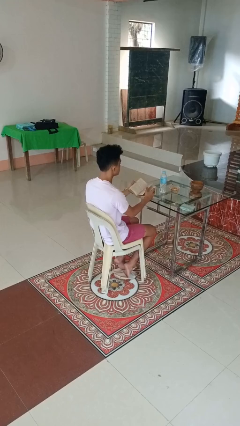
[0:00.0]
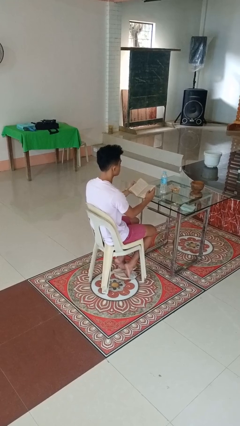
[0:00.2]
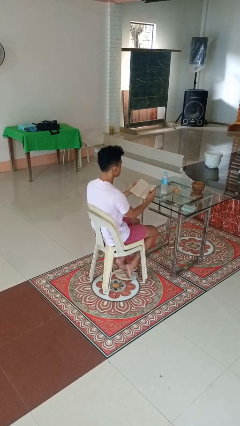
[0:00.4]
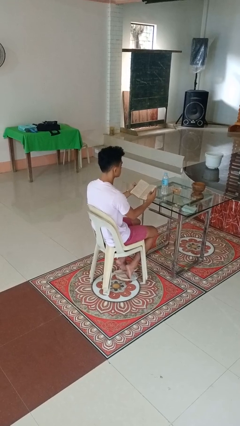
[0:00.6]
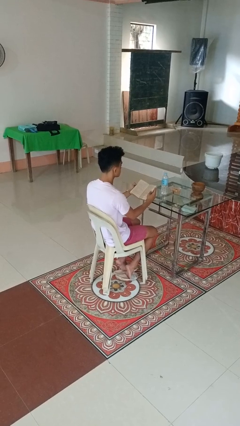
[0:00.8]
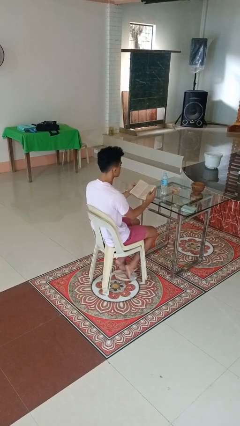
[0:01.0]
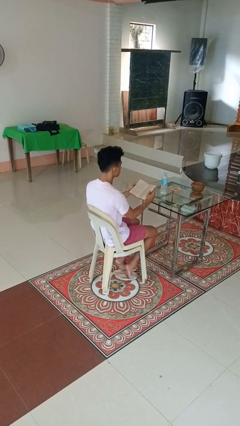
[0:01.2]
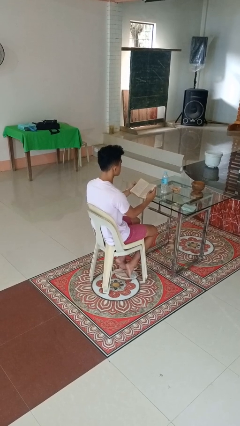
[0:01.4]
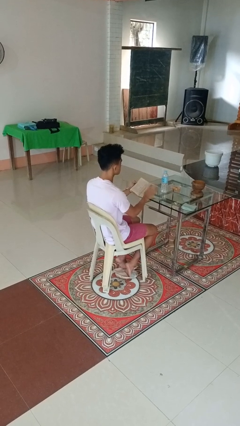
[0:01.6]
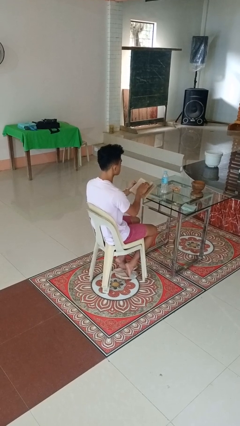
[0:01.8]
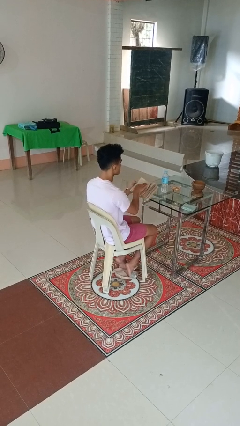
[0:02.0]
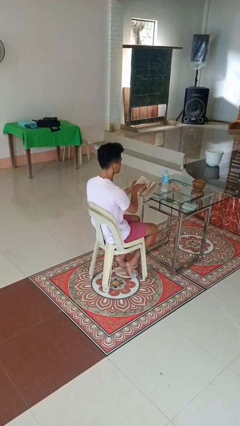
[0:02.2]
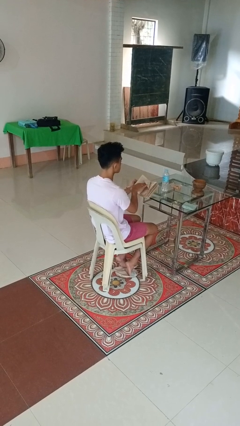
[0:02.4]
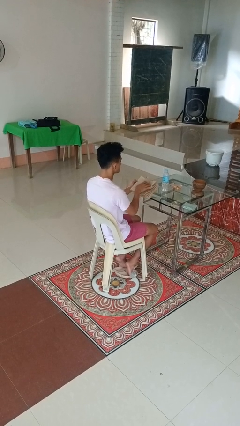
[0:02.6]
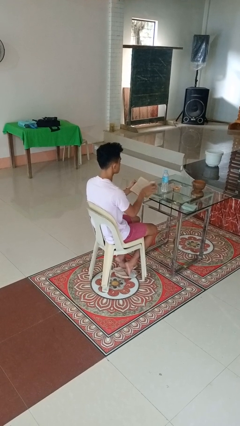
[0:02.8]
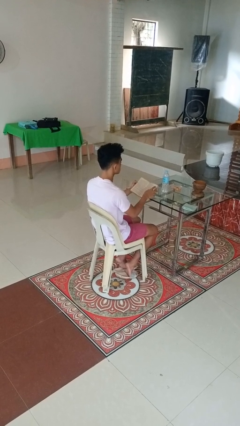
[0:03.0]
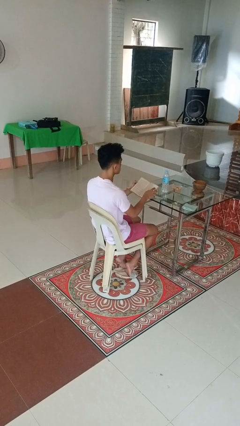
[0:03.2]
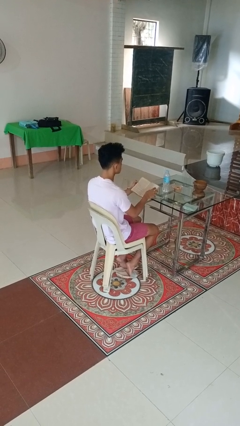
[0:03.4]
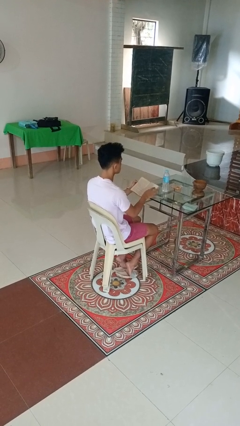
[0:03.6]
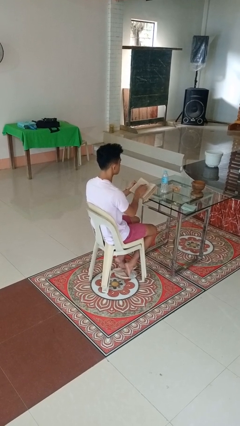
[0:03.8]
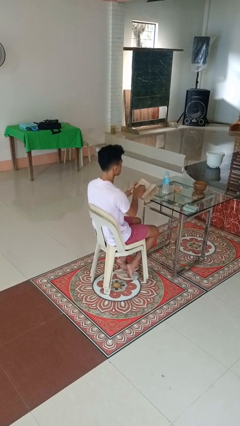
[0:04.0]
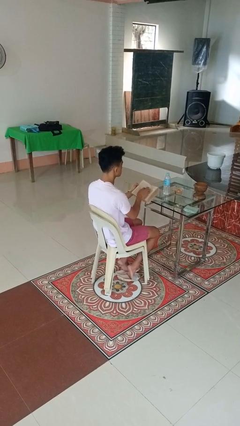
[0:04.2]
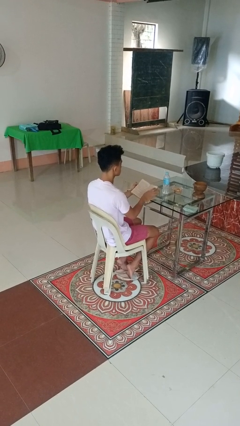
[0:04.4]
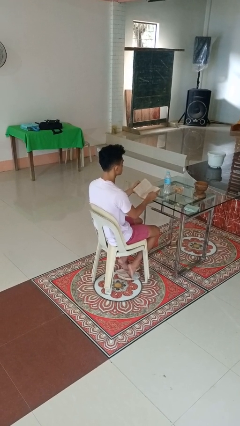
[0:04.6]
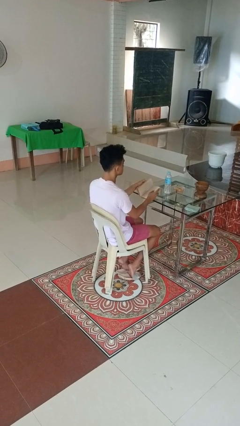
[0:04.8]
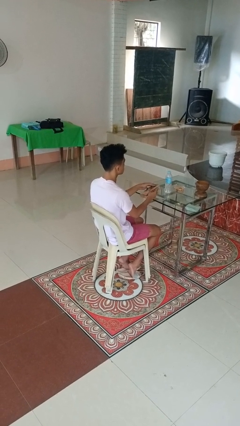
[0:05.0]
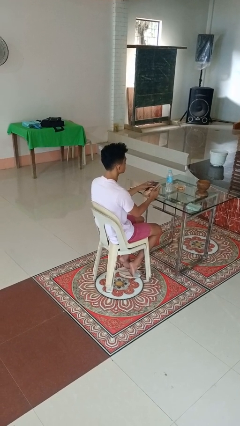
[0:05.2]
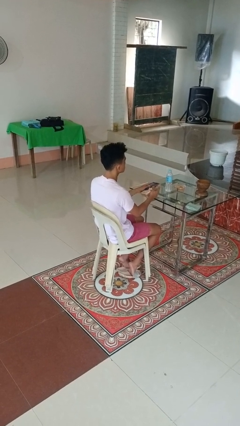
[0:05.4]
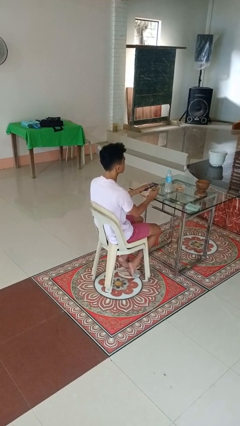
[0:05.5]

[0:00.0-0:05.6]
person reads book

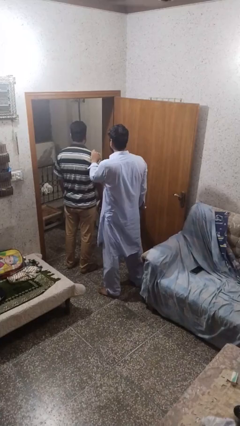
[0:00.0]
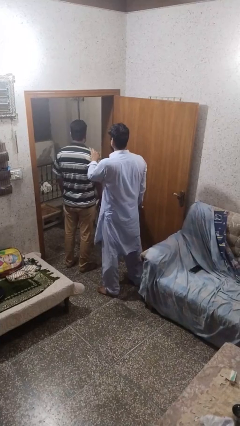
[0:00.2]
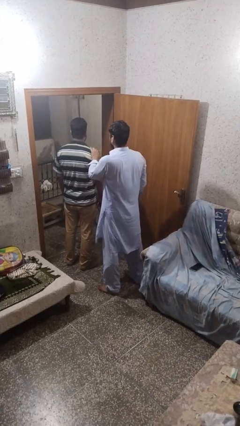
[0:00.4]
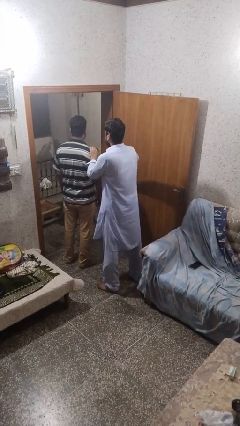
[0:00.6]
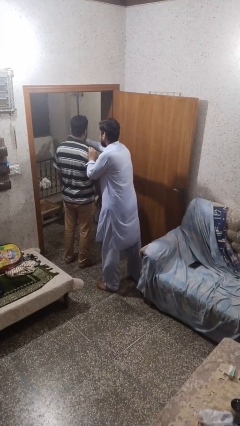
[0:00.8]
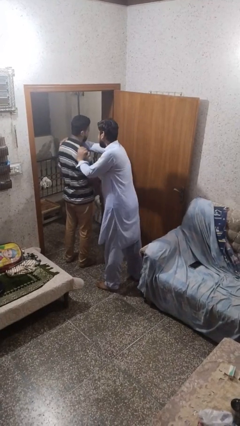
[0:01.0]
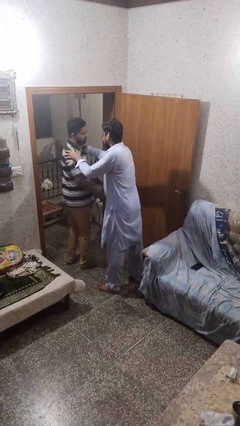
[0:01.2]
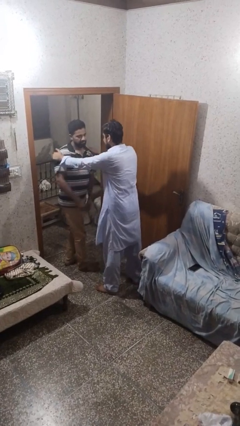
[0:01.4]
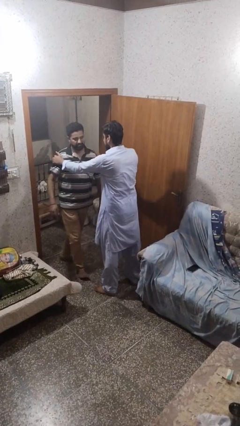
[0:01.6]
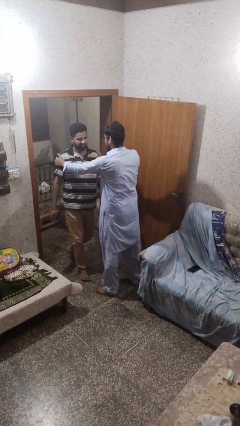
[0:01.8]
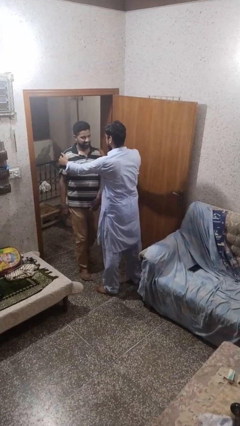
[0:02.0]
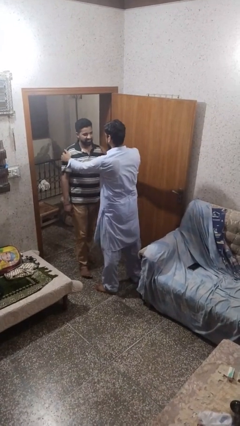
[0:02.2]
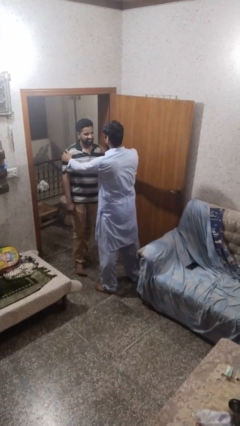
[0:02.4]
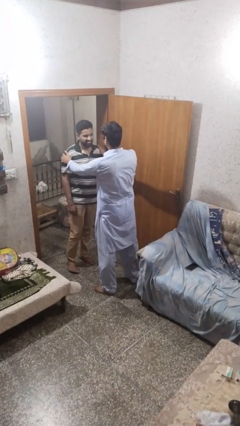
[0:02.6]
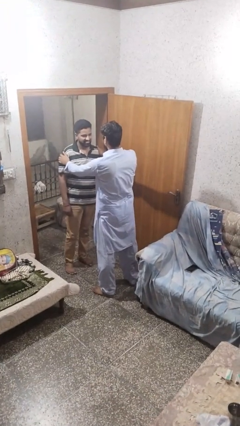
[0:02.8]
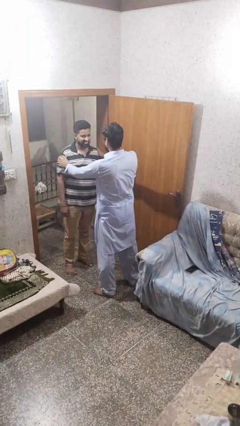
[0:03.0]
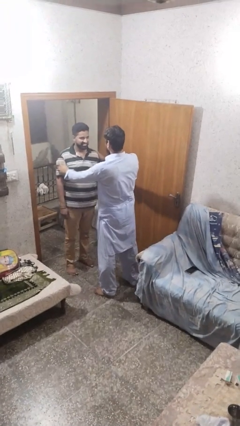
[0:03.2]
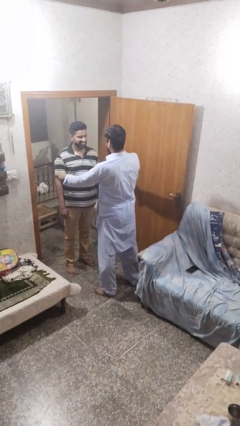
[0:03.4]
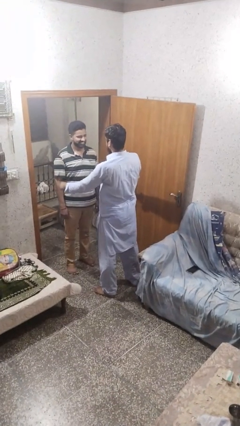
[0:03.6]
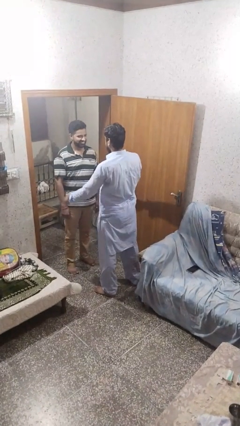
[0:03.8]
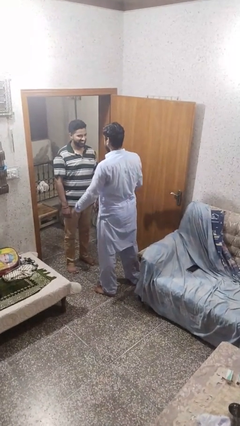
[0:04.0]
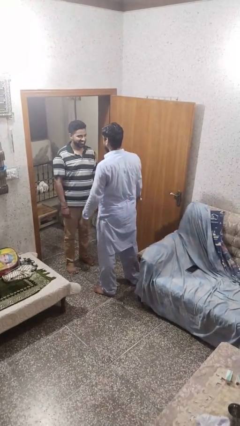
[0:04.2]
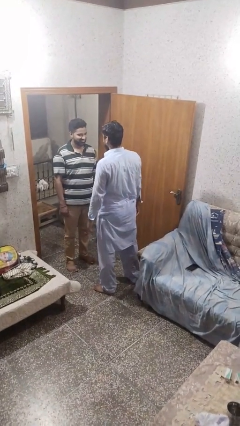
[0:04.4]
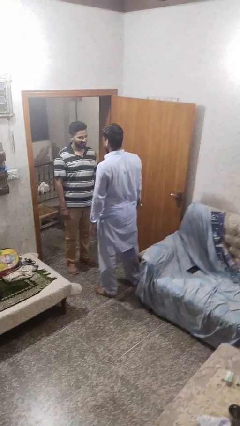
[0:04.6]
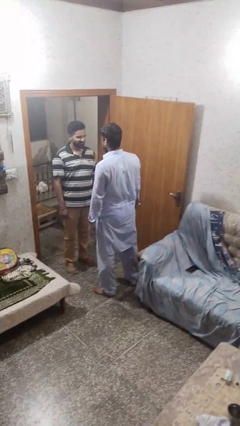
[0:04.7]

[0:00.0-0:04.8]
person spins person around

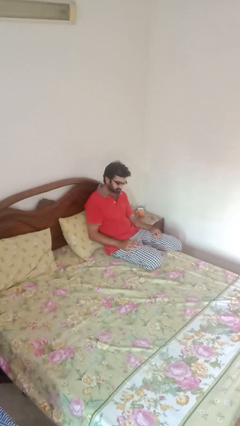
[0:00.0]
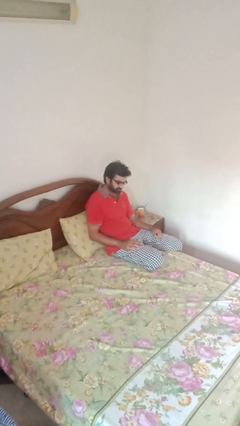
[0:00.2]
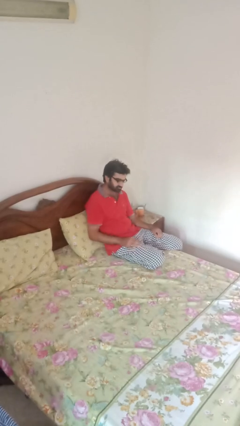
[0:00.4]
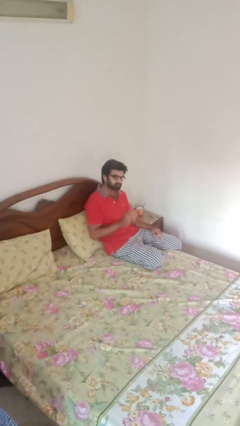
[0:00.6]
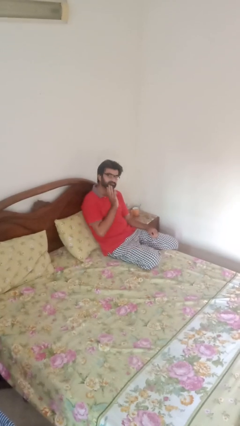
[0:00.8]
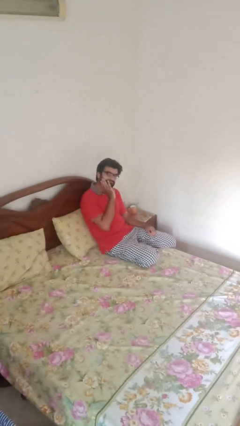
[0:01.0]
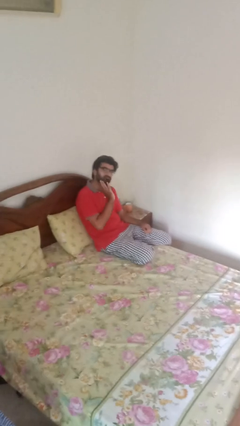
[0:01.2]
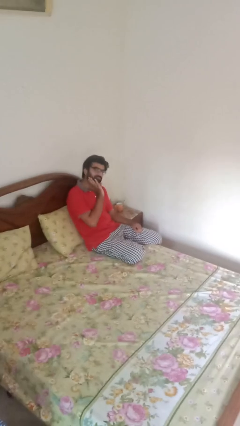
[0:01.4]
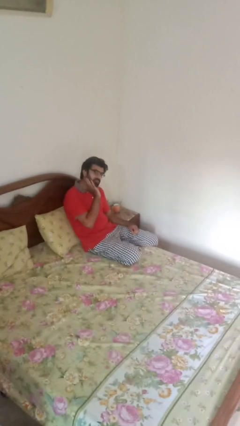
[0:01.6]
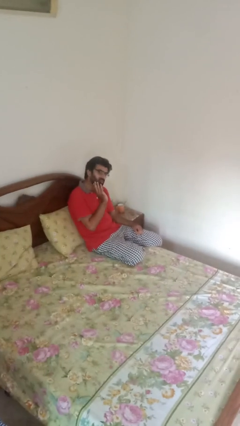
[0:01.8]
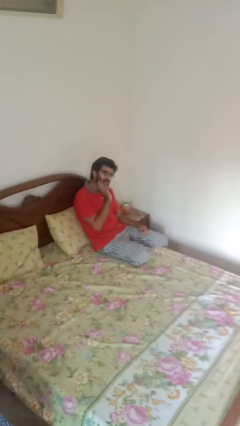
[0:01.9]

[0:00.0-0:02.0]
person strokes chin

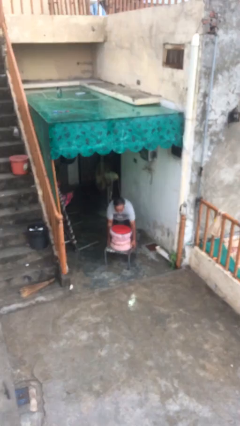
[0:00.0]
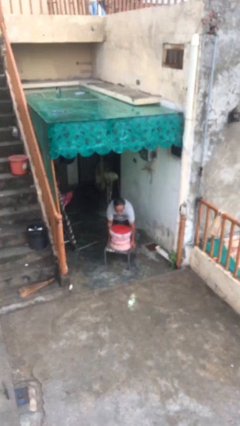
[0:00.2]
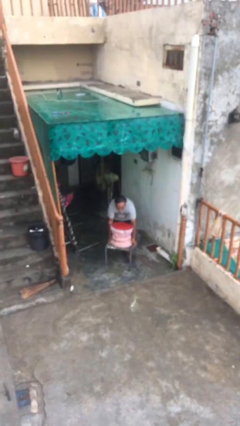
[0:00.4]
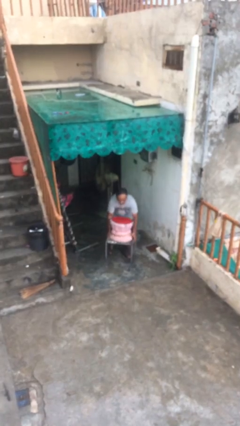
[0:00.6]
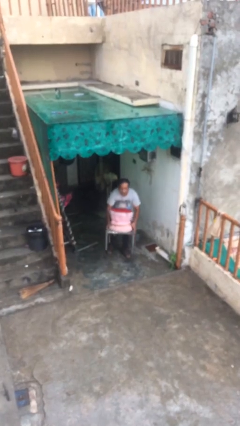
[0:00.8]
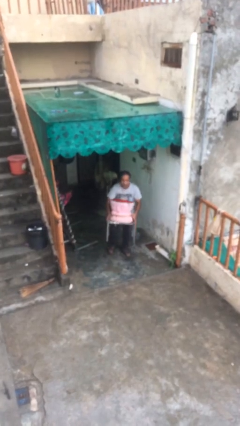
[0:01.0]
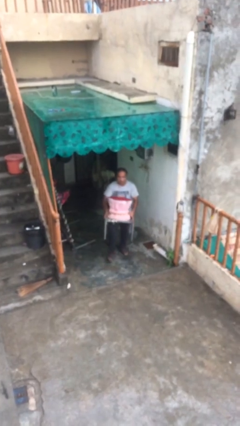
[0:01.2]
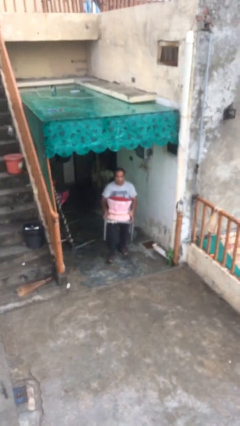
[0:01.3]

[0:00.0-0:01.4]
person picks up object from floor

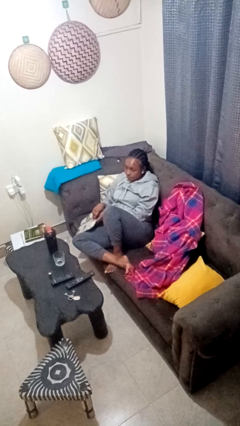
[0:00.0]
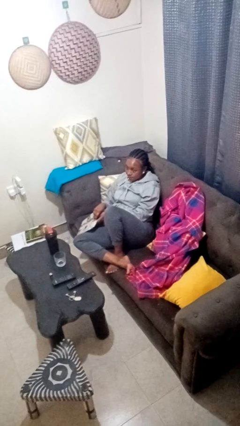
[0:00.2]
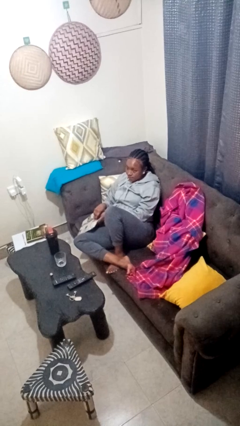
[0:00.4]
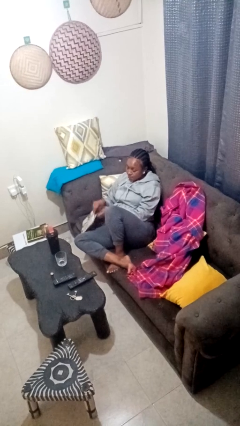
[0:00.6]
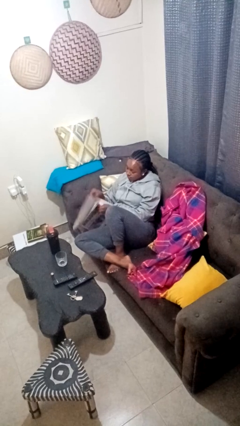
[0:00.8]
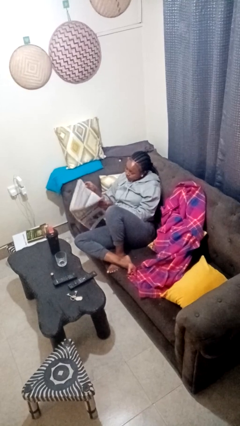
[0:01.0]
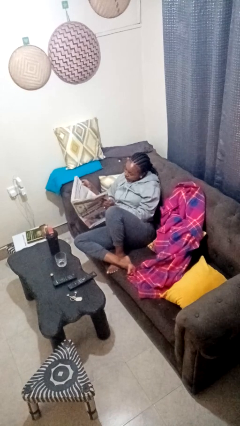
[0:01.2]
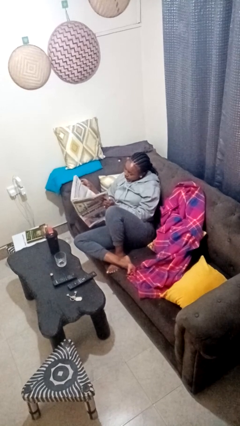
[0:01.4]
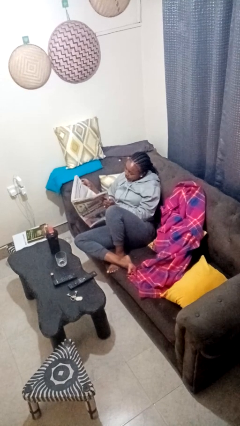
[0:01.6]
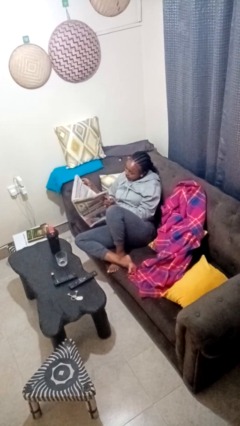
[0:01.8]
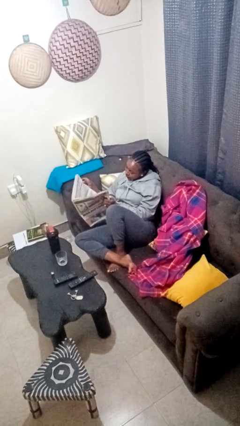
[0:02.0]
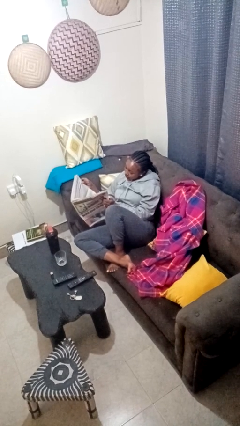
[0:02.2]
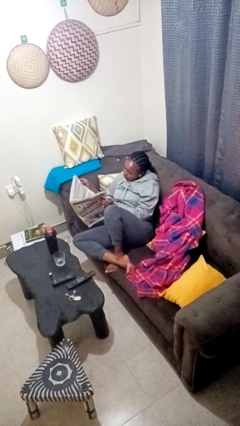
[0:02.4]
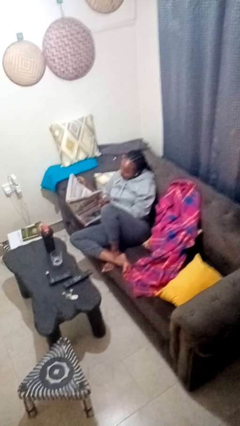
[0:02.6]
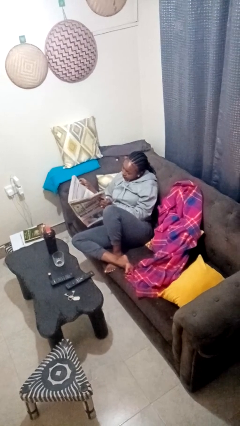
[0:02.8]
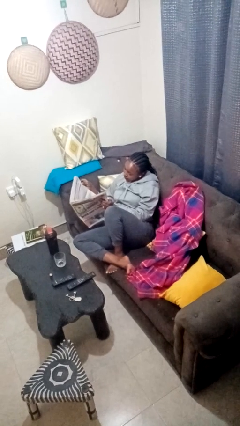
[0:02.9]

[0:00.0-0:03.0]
person reads newspaper

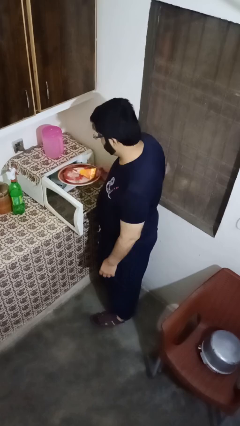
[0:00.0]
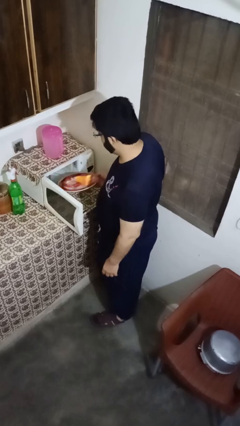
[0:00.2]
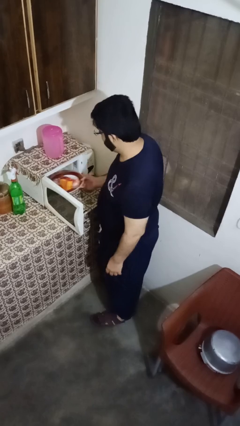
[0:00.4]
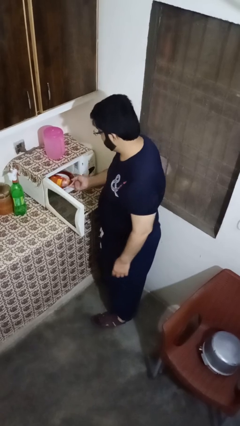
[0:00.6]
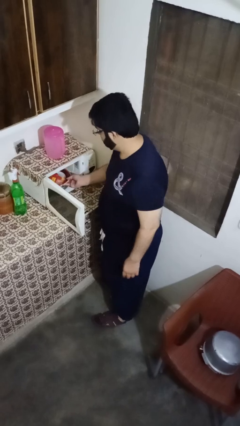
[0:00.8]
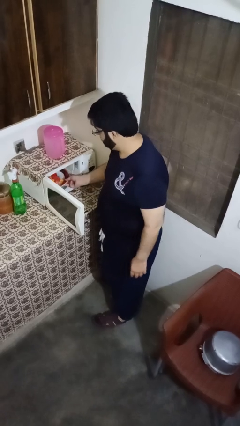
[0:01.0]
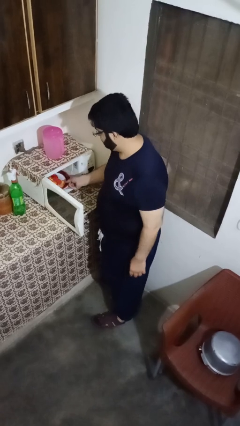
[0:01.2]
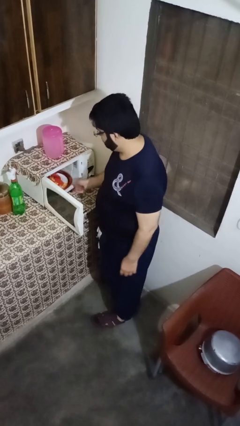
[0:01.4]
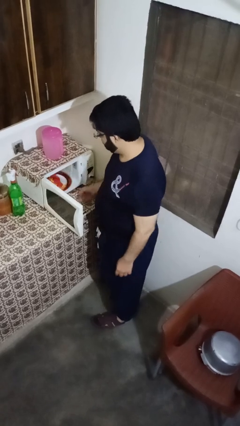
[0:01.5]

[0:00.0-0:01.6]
person puts object into oven
